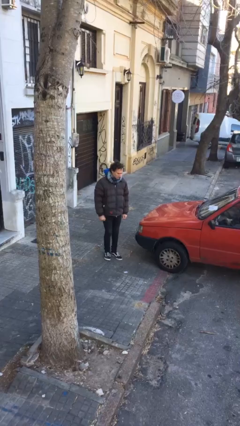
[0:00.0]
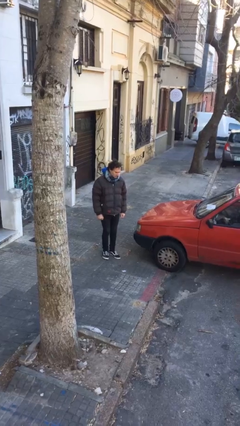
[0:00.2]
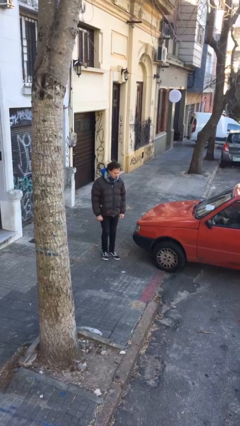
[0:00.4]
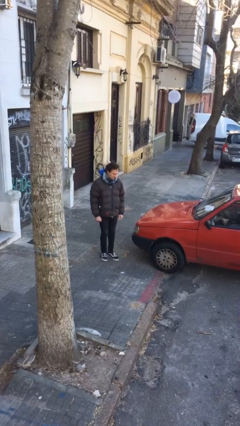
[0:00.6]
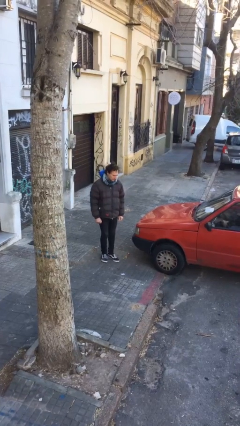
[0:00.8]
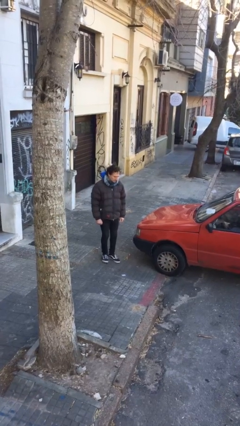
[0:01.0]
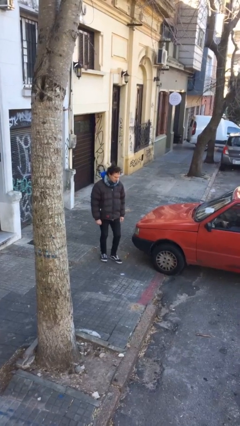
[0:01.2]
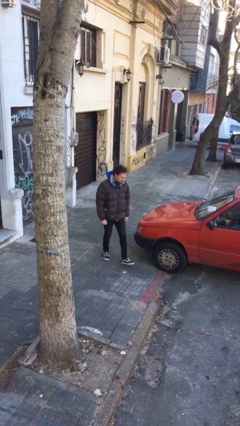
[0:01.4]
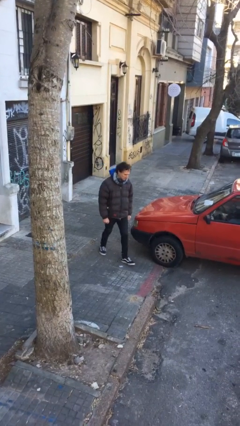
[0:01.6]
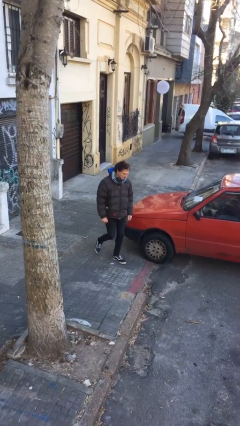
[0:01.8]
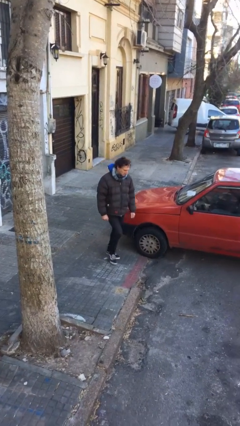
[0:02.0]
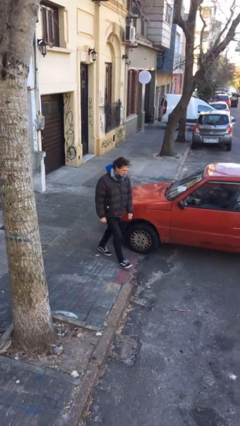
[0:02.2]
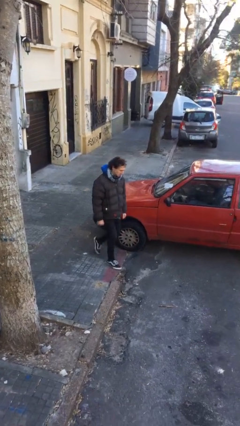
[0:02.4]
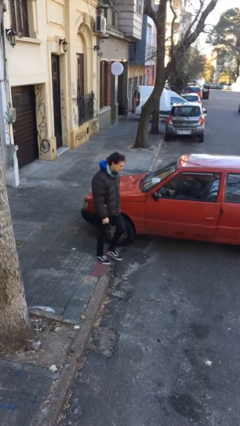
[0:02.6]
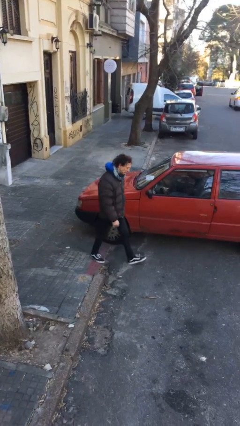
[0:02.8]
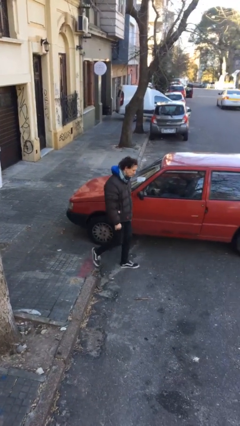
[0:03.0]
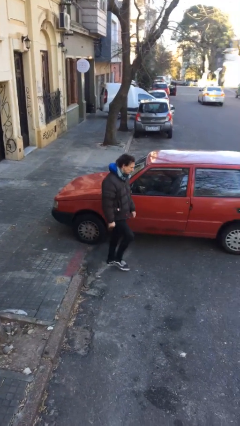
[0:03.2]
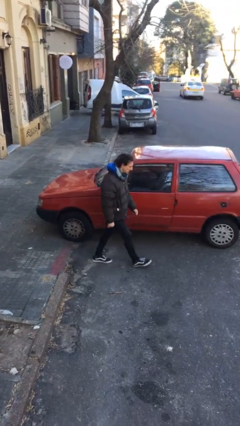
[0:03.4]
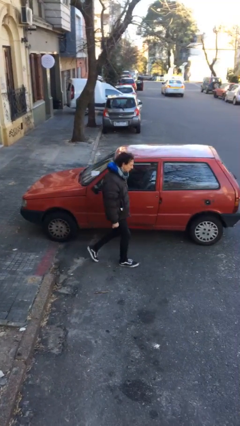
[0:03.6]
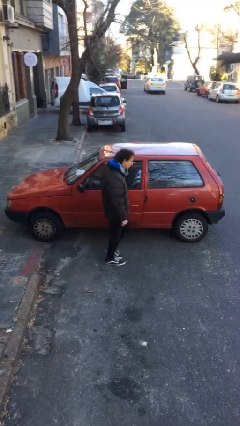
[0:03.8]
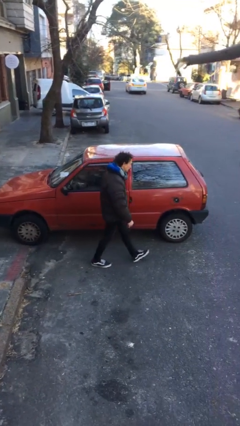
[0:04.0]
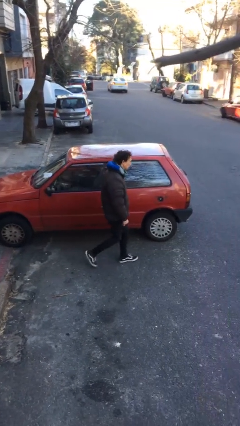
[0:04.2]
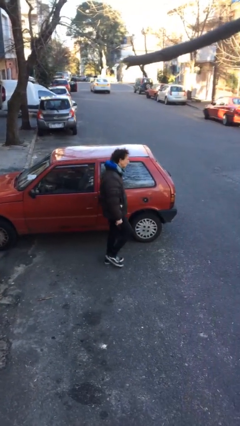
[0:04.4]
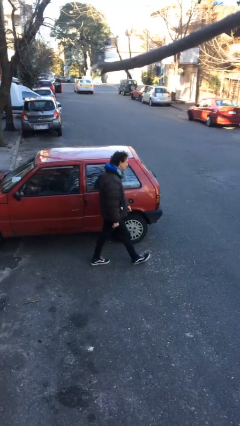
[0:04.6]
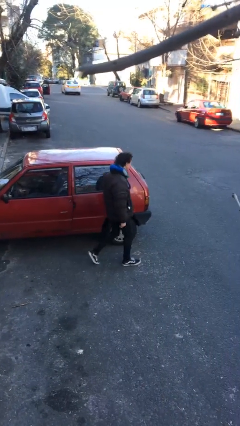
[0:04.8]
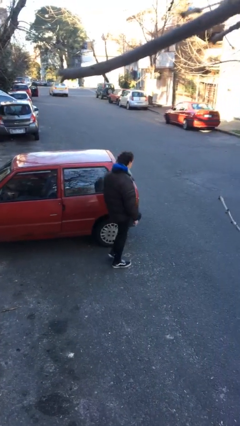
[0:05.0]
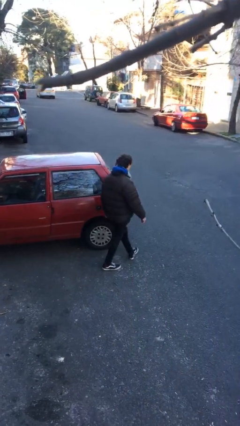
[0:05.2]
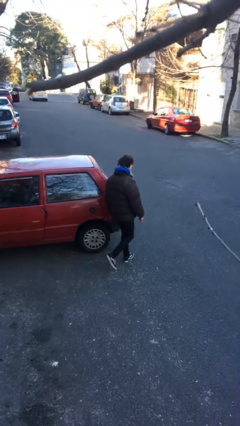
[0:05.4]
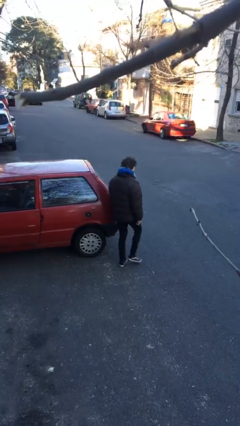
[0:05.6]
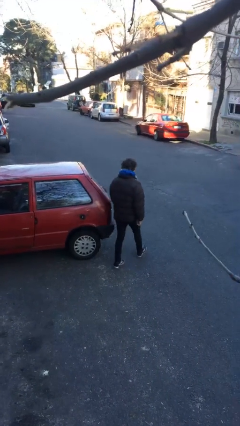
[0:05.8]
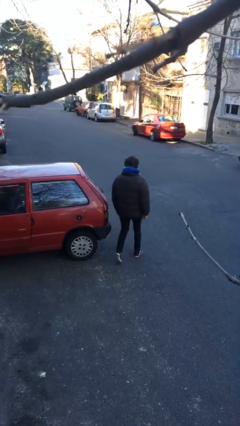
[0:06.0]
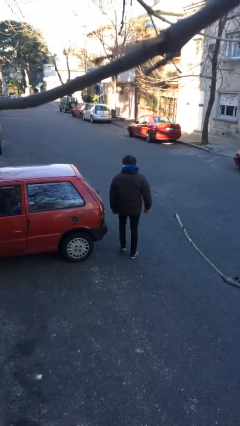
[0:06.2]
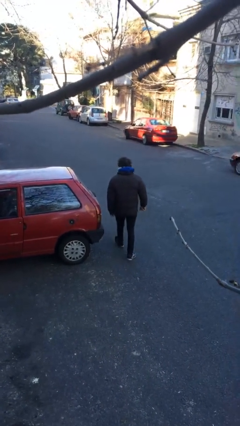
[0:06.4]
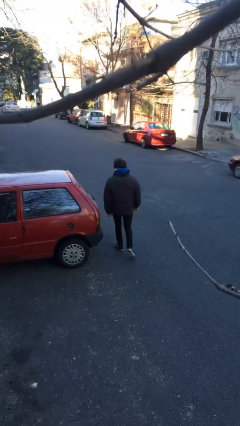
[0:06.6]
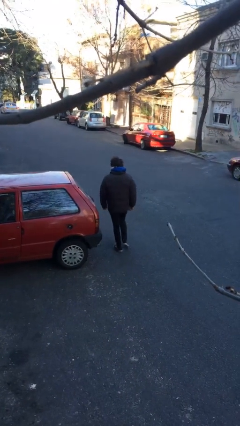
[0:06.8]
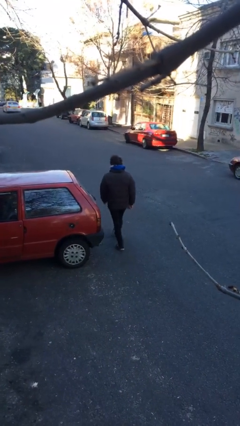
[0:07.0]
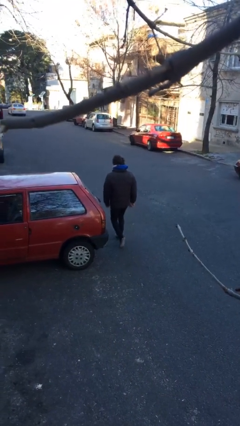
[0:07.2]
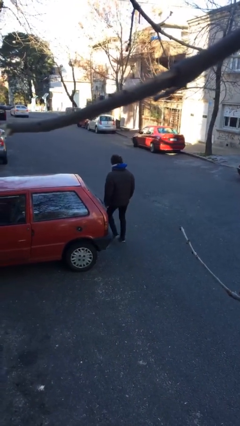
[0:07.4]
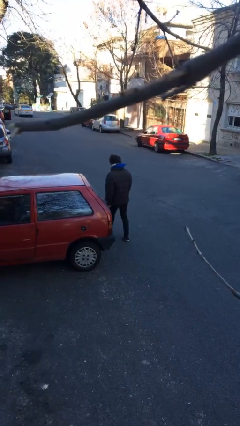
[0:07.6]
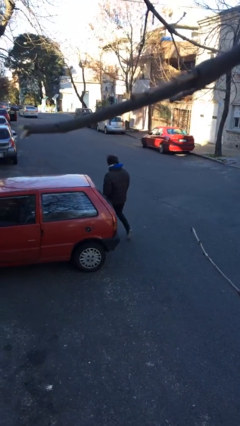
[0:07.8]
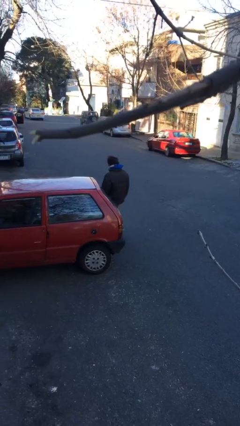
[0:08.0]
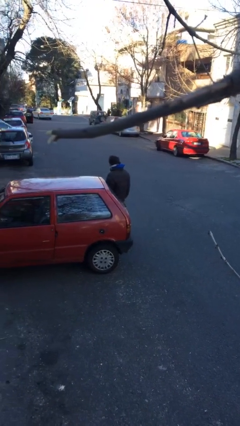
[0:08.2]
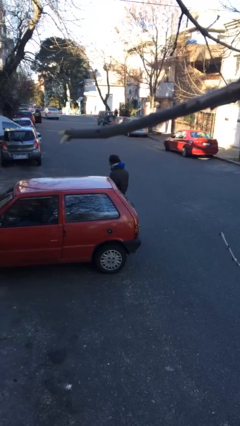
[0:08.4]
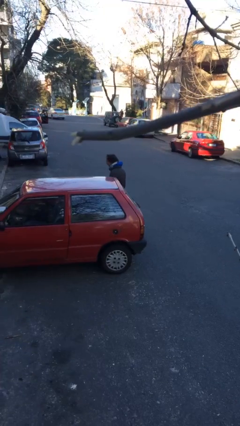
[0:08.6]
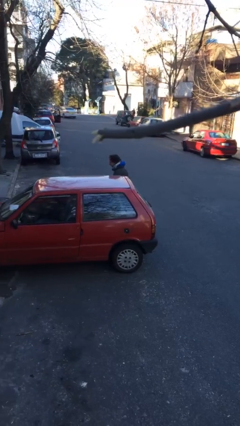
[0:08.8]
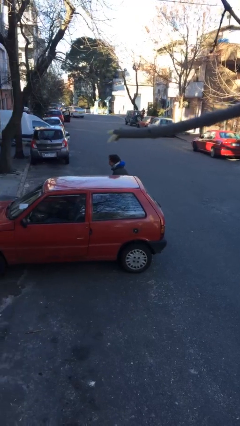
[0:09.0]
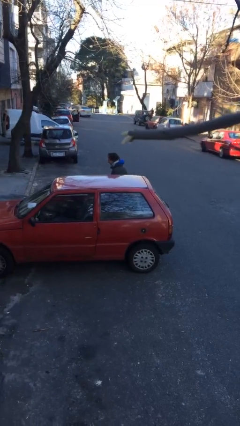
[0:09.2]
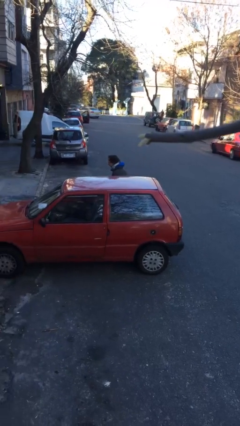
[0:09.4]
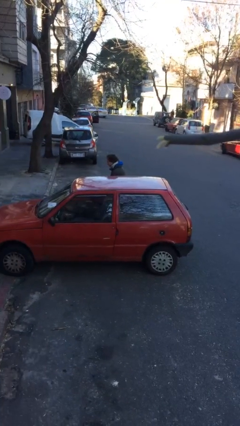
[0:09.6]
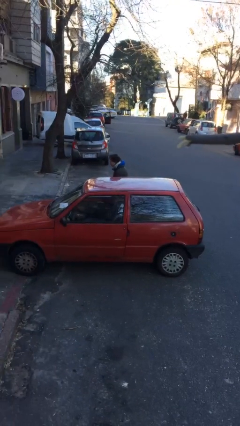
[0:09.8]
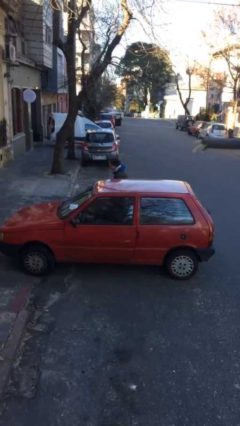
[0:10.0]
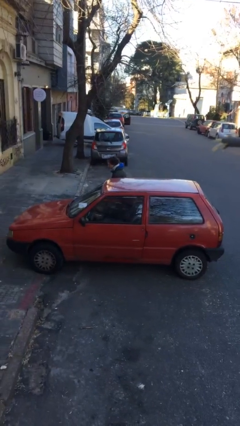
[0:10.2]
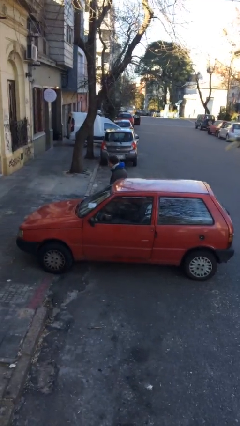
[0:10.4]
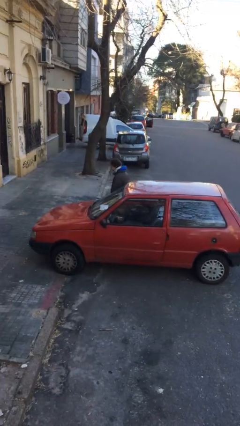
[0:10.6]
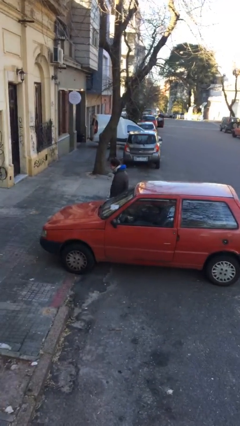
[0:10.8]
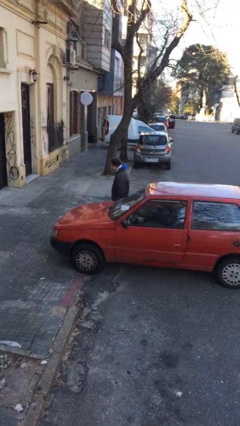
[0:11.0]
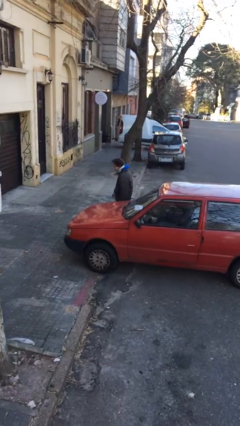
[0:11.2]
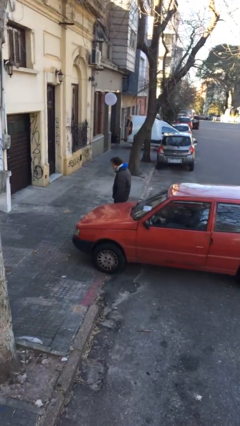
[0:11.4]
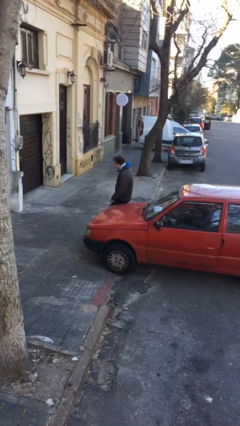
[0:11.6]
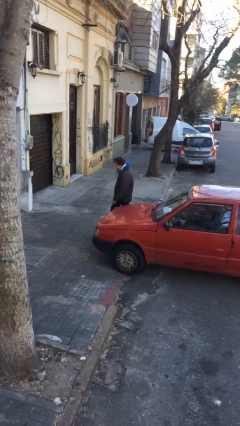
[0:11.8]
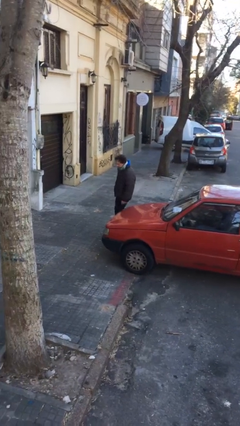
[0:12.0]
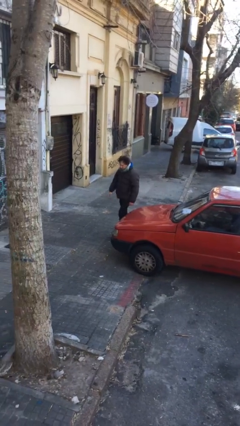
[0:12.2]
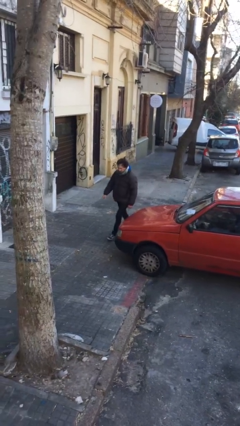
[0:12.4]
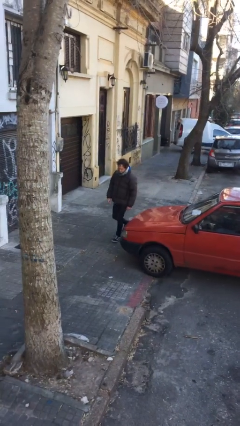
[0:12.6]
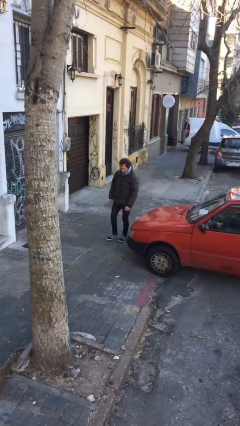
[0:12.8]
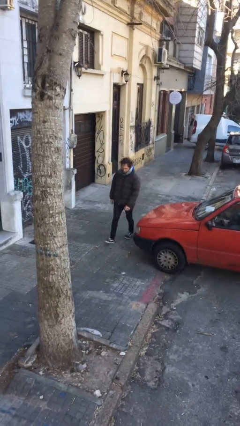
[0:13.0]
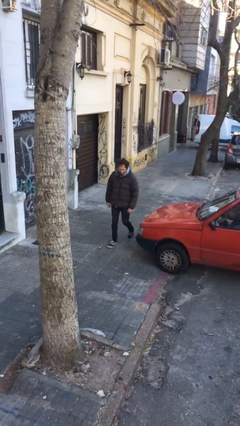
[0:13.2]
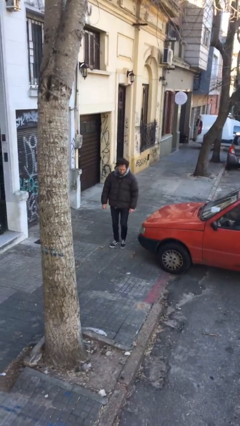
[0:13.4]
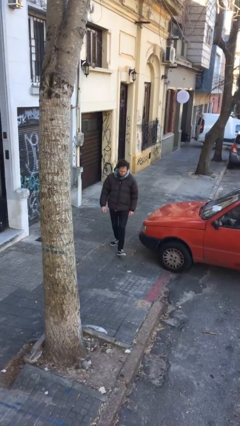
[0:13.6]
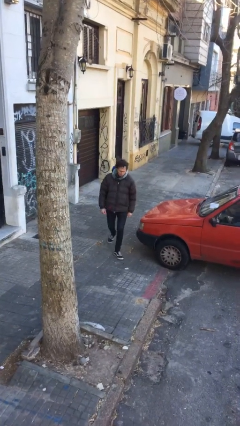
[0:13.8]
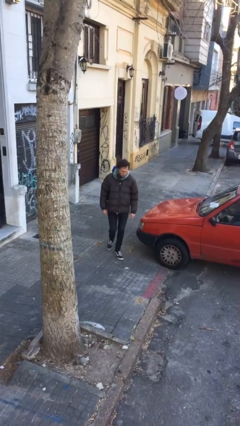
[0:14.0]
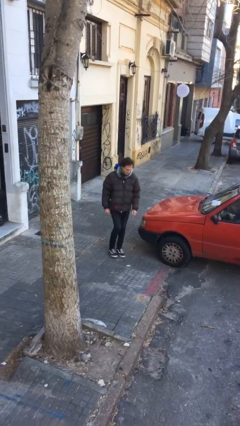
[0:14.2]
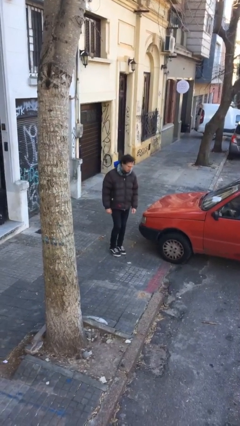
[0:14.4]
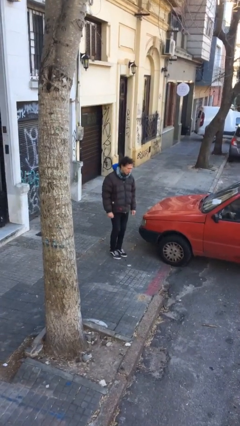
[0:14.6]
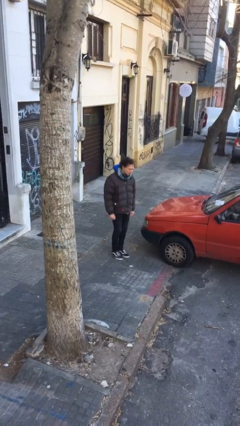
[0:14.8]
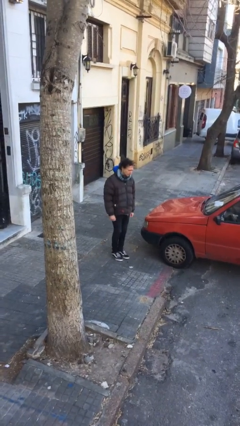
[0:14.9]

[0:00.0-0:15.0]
person walks around car

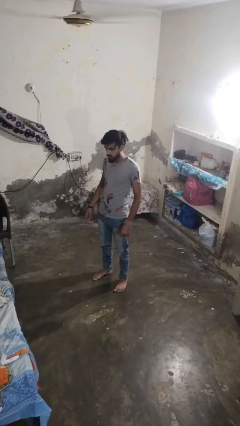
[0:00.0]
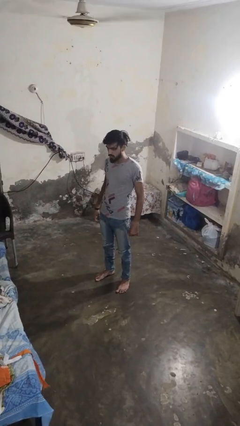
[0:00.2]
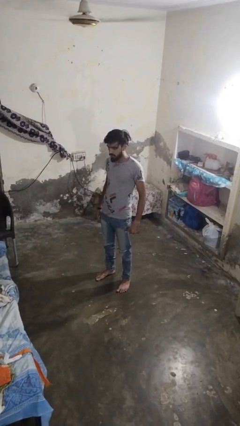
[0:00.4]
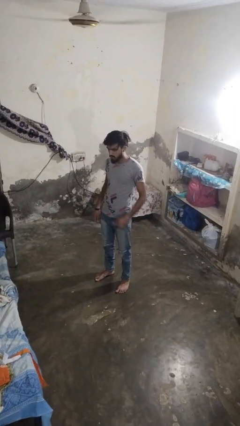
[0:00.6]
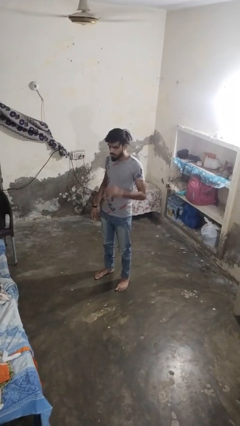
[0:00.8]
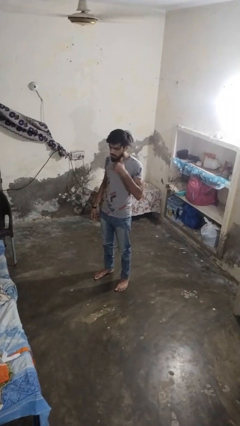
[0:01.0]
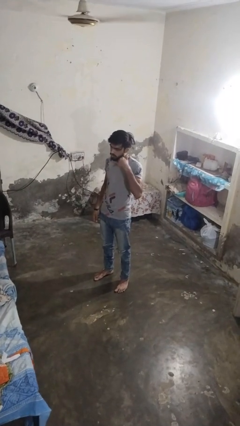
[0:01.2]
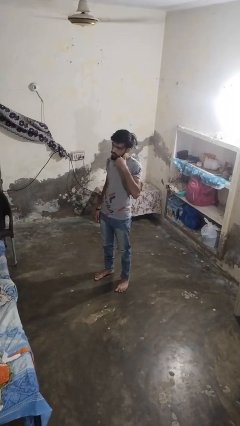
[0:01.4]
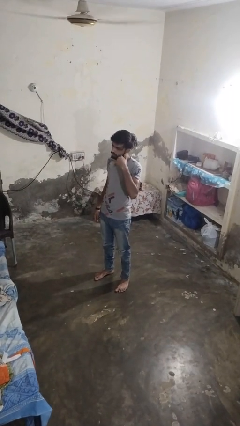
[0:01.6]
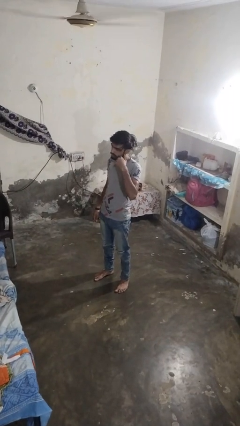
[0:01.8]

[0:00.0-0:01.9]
person gestures call me

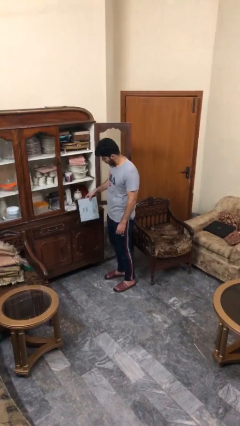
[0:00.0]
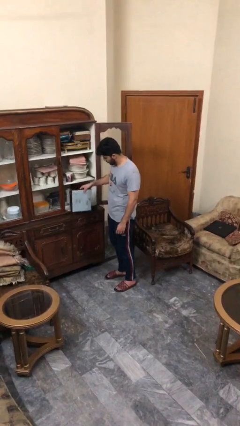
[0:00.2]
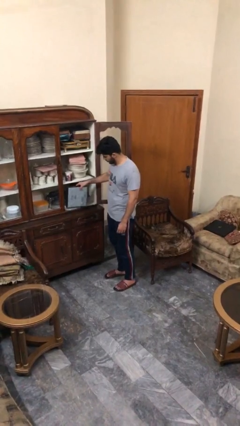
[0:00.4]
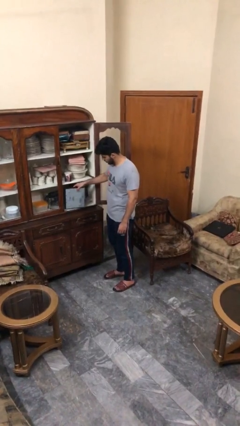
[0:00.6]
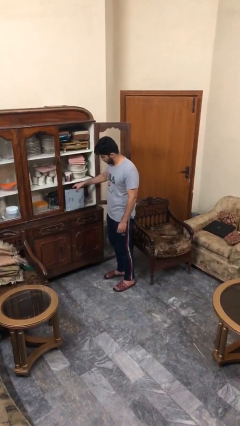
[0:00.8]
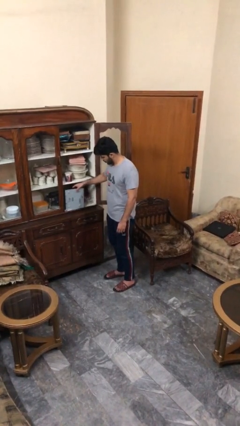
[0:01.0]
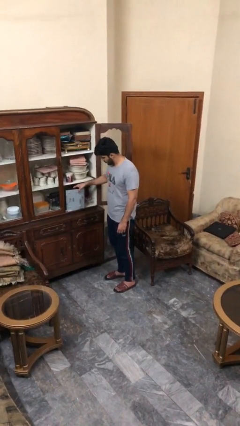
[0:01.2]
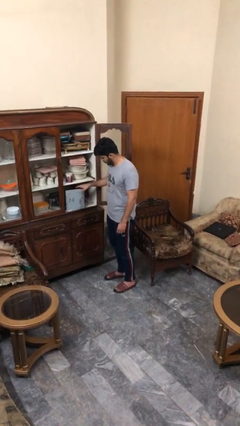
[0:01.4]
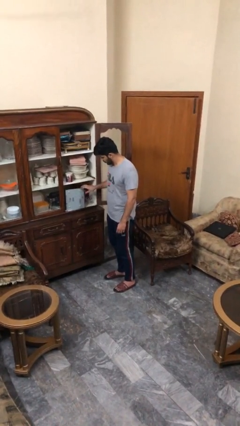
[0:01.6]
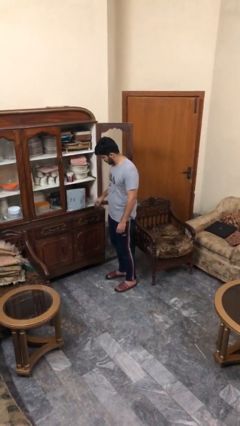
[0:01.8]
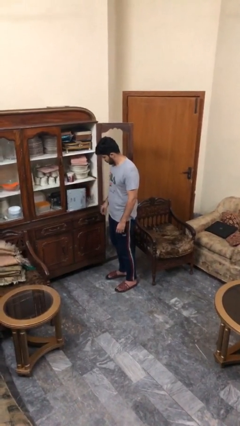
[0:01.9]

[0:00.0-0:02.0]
person puts down object into cabinet
